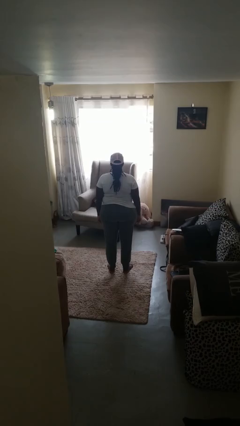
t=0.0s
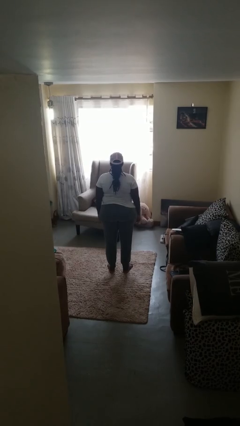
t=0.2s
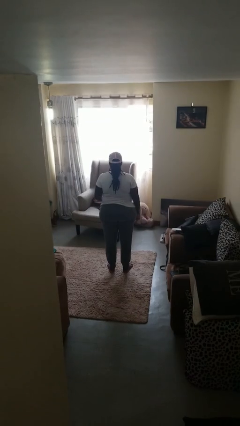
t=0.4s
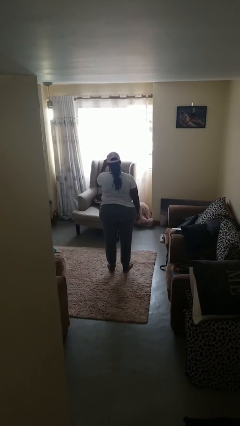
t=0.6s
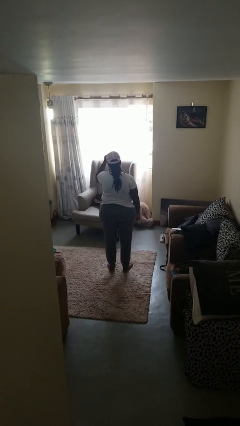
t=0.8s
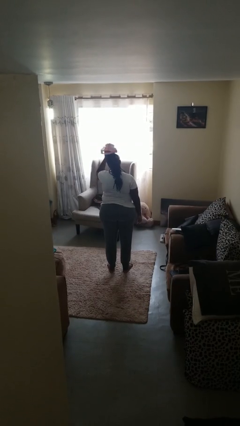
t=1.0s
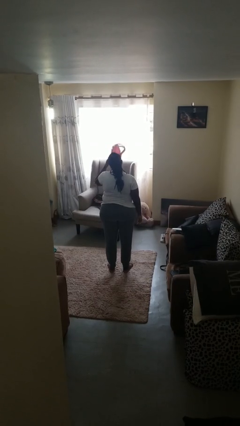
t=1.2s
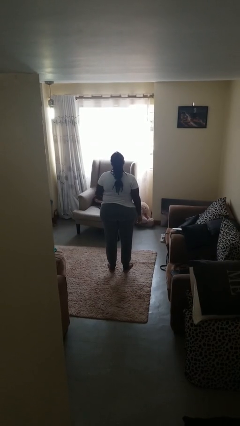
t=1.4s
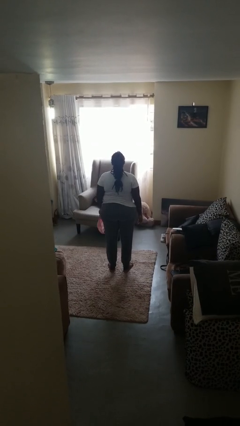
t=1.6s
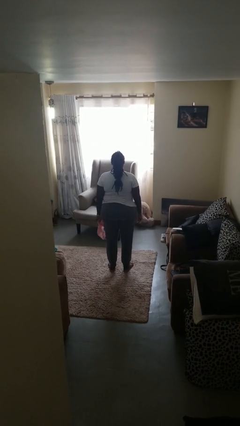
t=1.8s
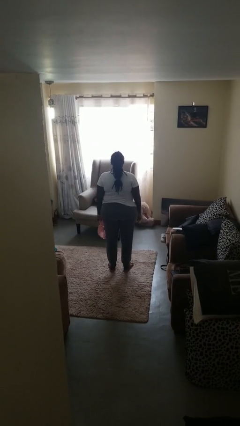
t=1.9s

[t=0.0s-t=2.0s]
person takes off hat

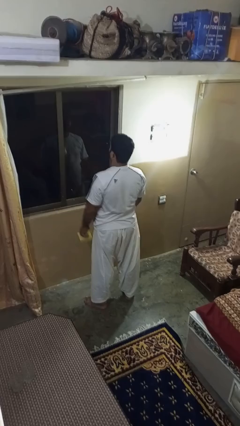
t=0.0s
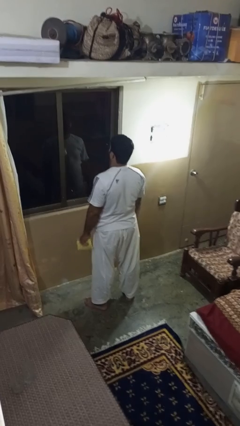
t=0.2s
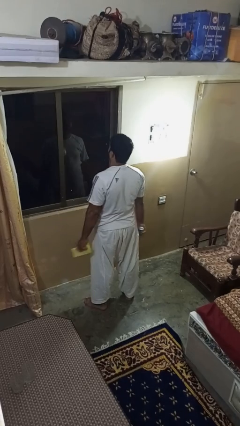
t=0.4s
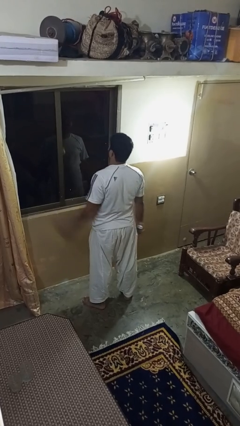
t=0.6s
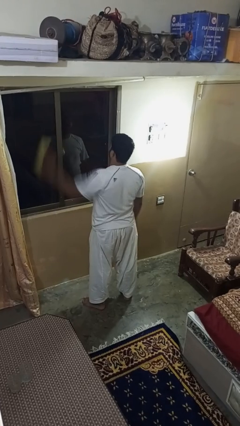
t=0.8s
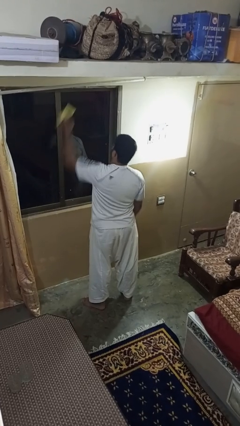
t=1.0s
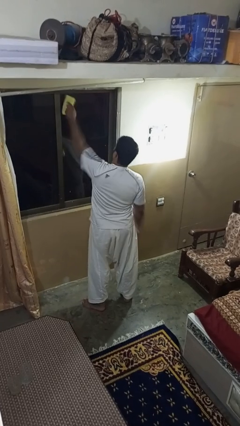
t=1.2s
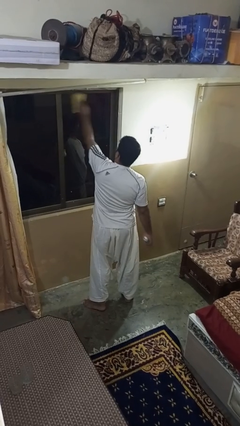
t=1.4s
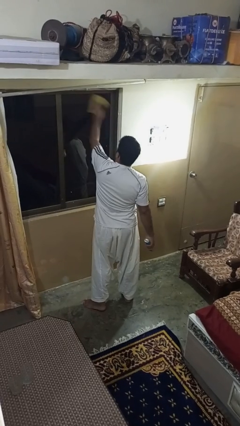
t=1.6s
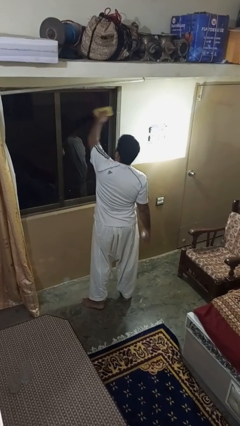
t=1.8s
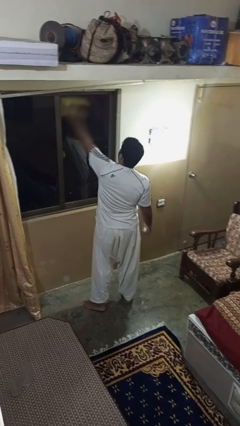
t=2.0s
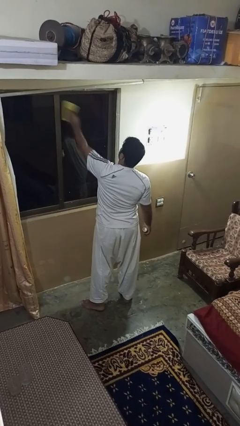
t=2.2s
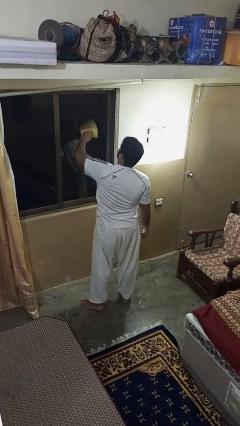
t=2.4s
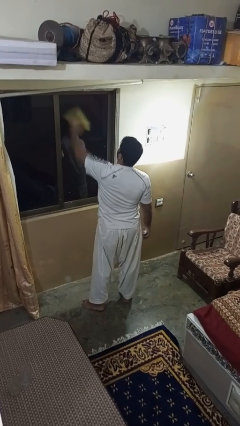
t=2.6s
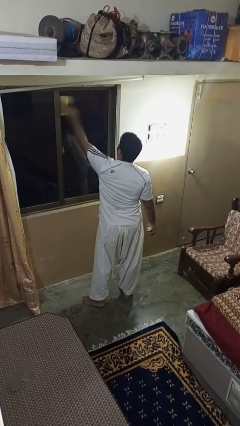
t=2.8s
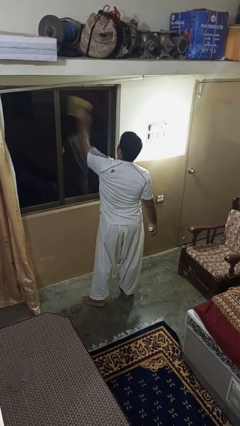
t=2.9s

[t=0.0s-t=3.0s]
person washes window

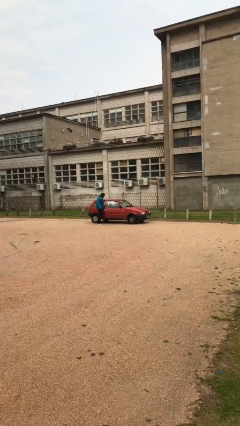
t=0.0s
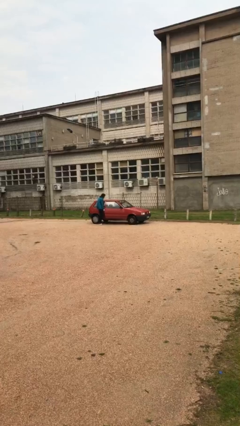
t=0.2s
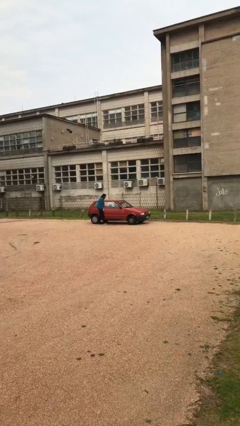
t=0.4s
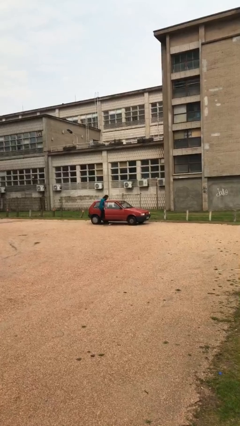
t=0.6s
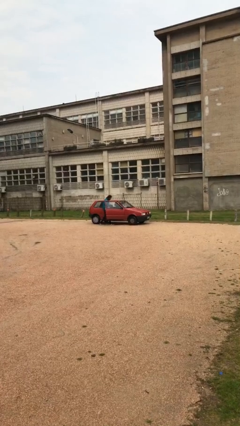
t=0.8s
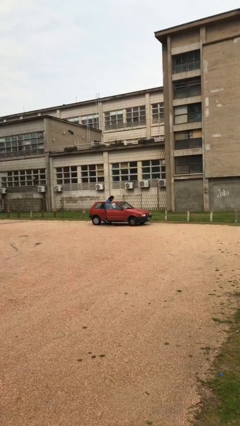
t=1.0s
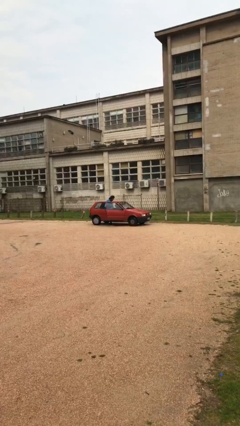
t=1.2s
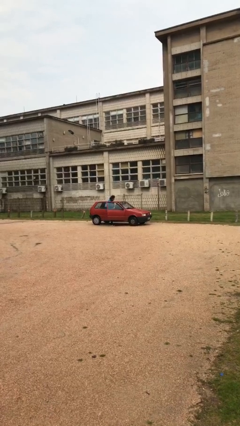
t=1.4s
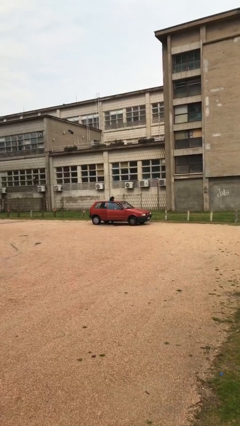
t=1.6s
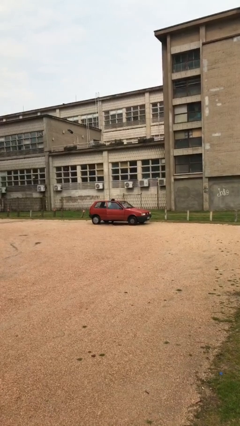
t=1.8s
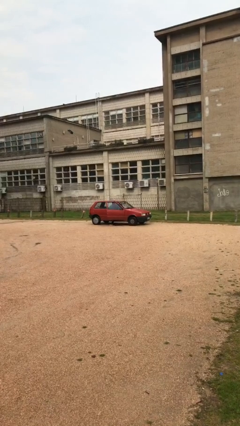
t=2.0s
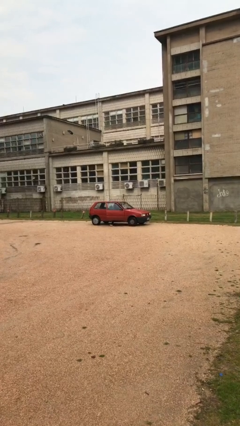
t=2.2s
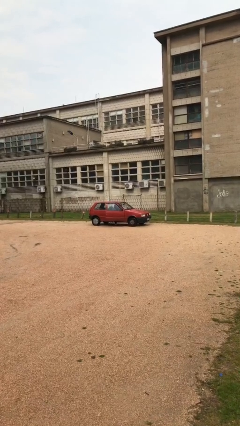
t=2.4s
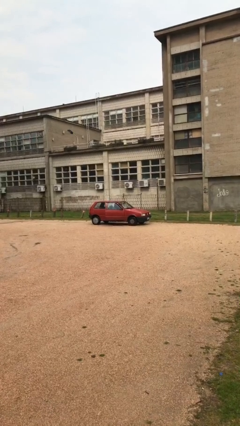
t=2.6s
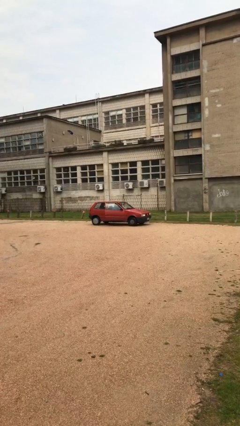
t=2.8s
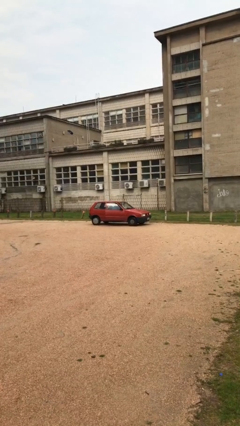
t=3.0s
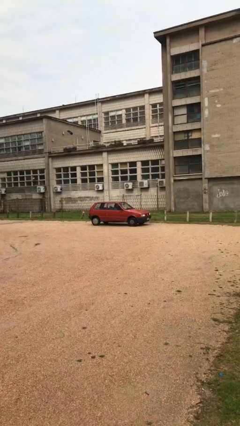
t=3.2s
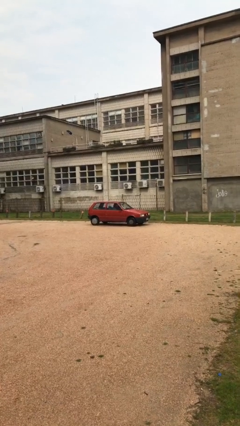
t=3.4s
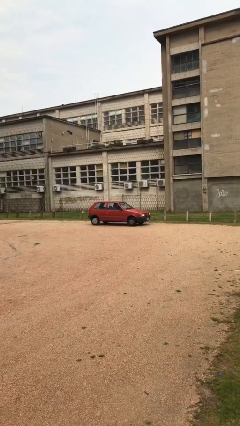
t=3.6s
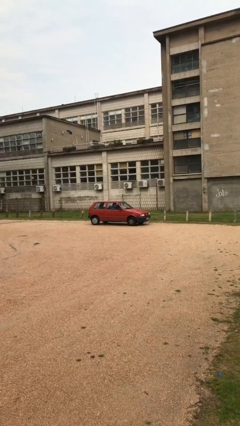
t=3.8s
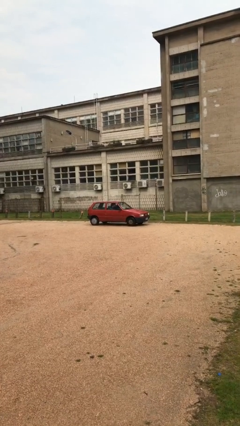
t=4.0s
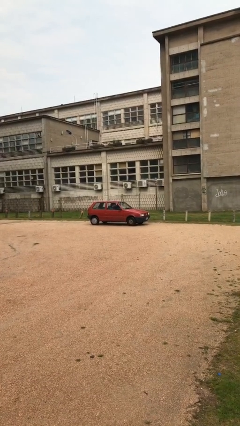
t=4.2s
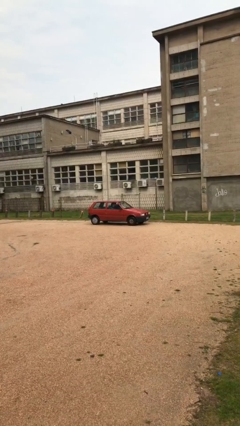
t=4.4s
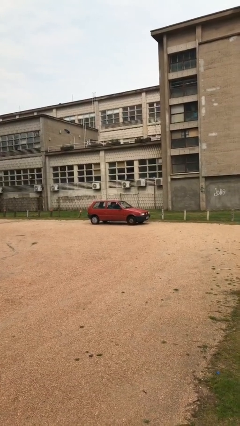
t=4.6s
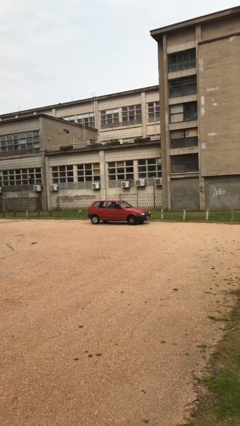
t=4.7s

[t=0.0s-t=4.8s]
car picks up person

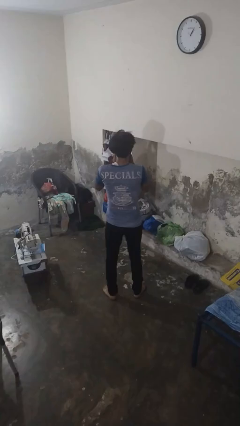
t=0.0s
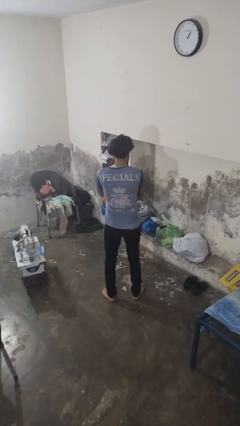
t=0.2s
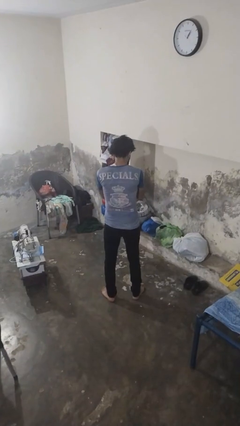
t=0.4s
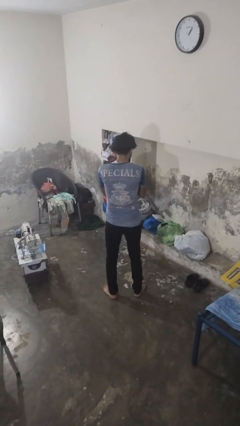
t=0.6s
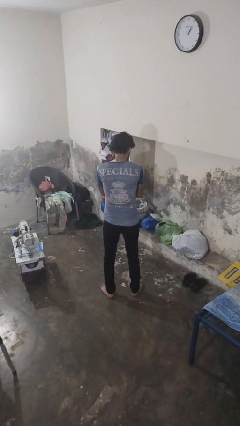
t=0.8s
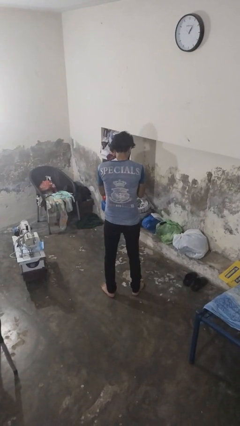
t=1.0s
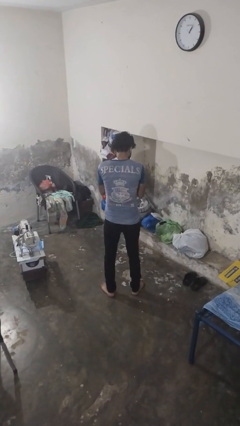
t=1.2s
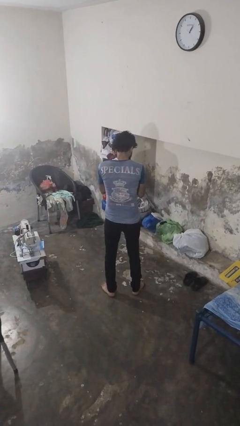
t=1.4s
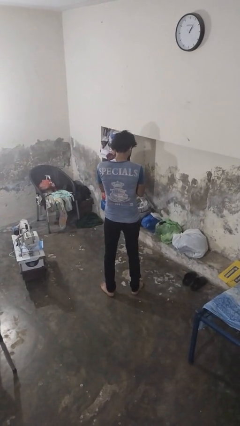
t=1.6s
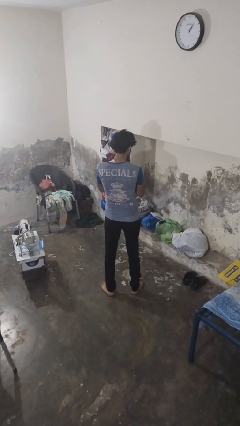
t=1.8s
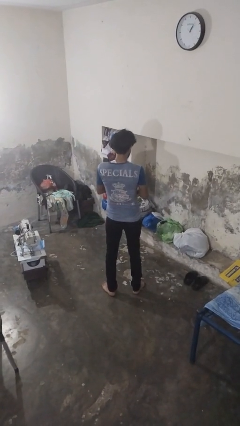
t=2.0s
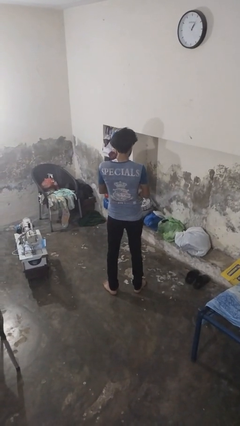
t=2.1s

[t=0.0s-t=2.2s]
person sneezes into hand

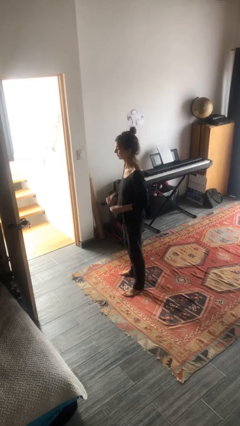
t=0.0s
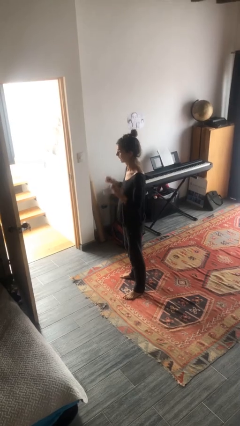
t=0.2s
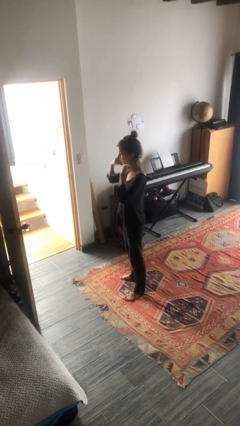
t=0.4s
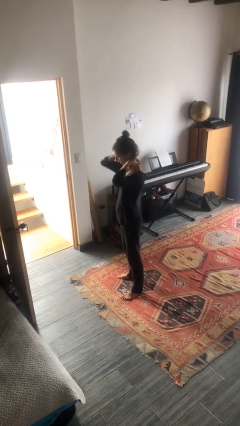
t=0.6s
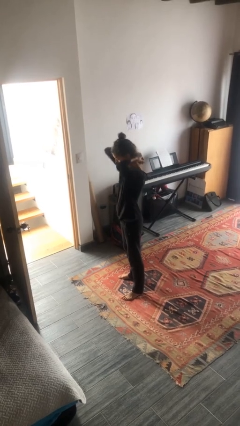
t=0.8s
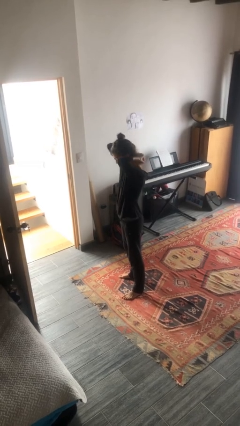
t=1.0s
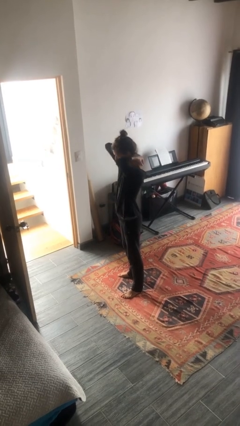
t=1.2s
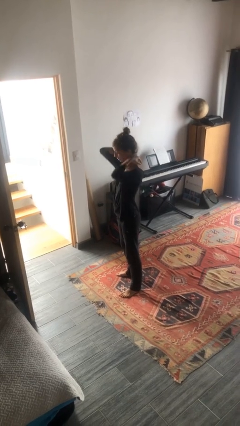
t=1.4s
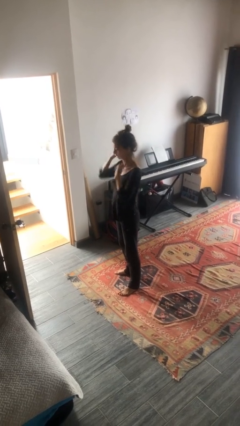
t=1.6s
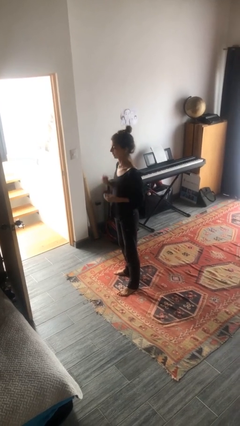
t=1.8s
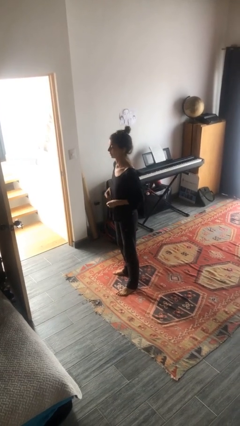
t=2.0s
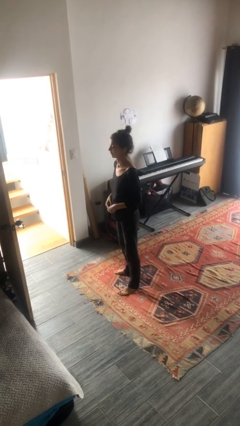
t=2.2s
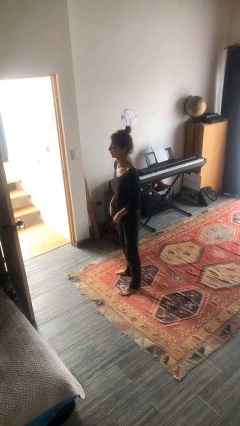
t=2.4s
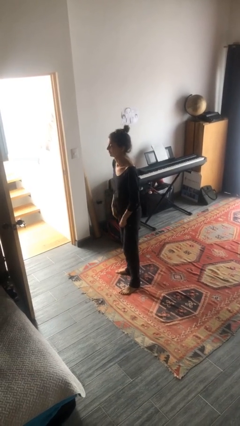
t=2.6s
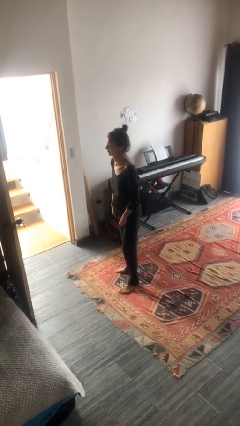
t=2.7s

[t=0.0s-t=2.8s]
person puts on necklace

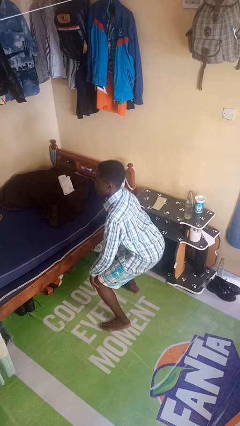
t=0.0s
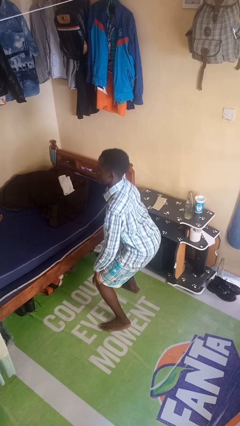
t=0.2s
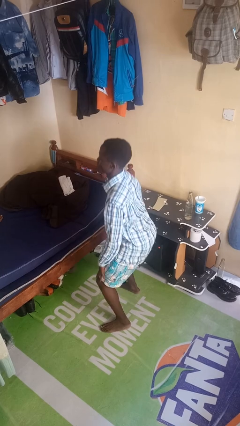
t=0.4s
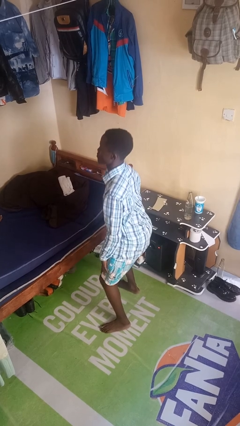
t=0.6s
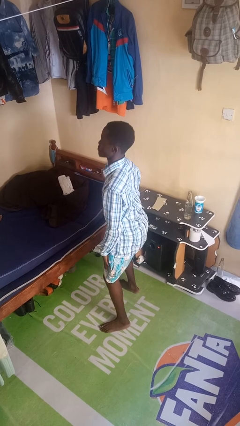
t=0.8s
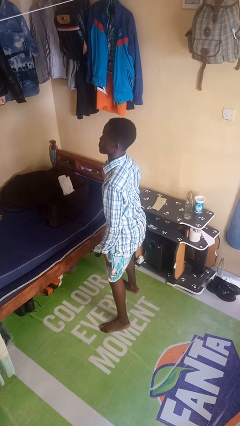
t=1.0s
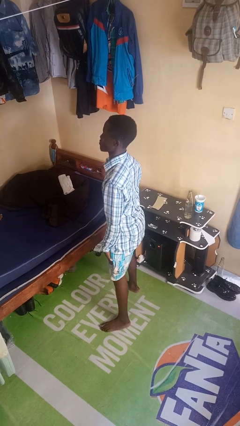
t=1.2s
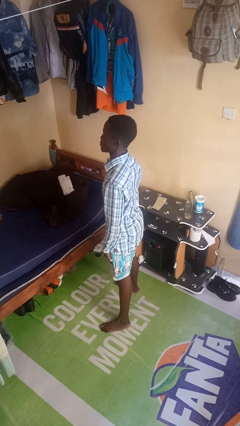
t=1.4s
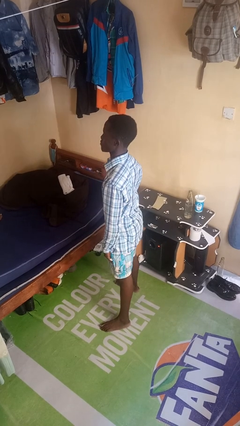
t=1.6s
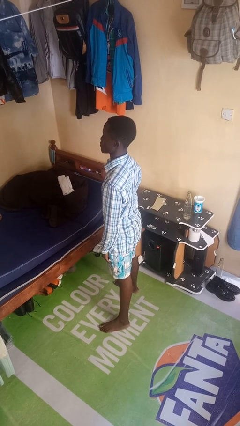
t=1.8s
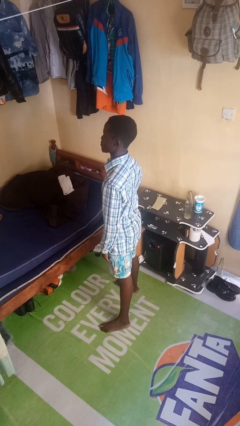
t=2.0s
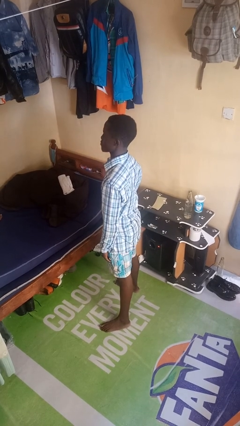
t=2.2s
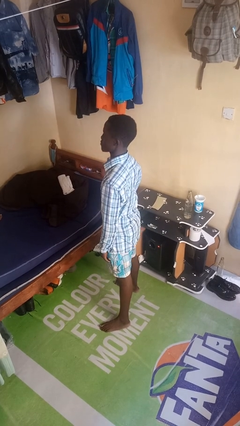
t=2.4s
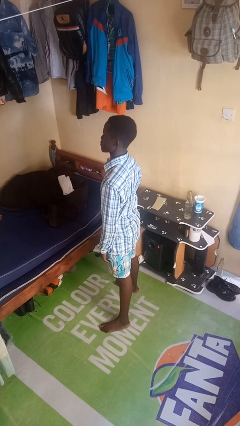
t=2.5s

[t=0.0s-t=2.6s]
person stands up
